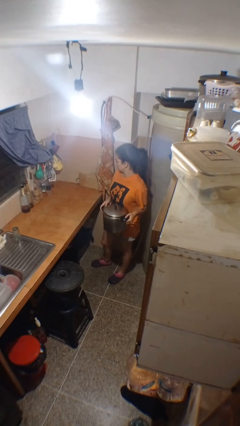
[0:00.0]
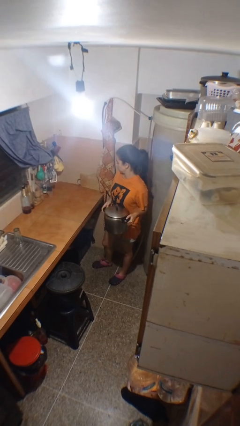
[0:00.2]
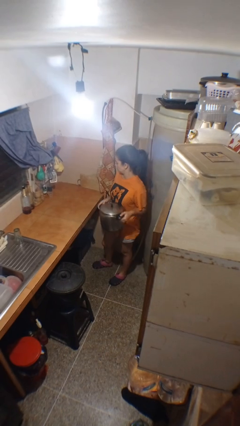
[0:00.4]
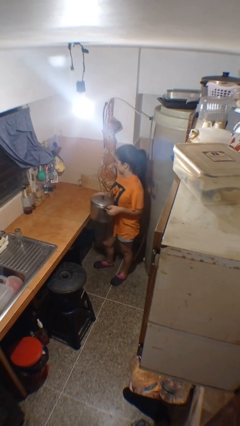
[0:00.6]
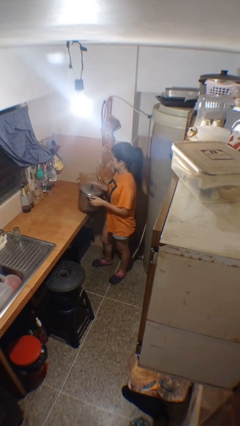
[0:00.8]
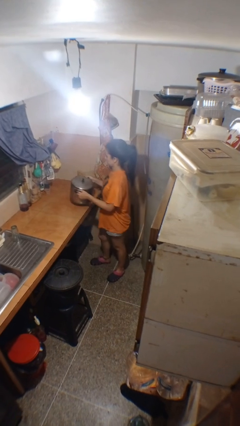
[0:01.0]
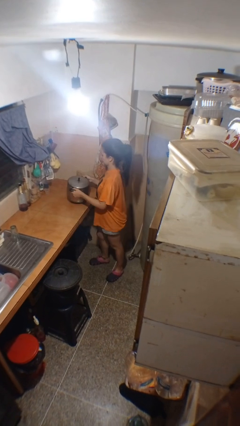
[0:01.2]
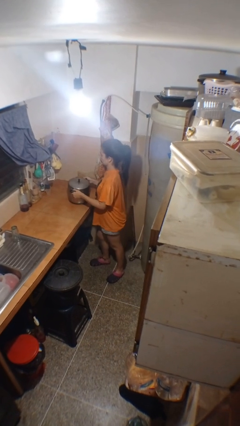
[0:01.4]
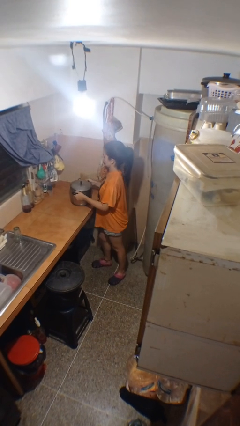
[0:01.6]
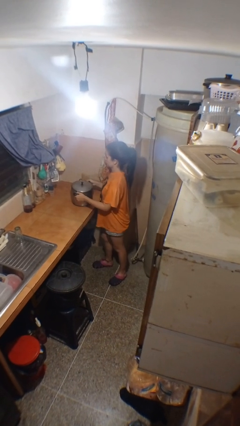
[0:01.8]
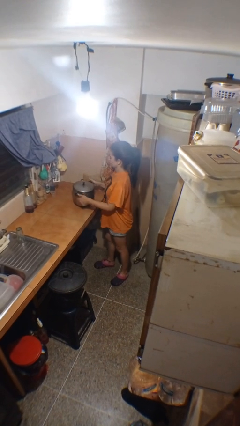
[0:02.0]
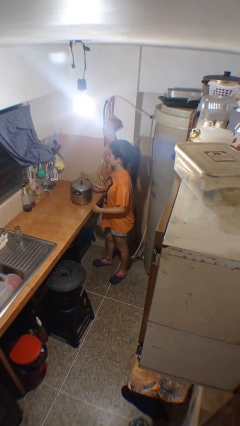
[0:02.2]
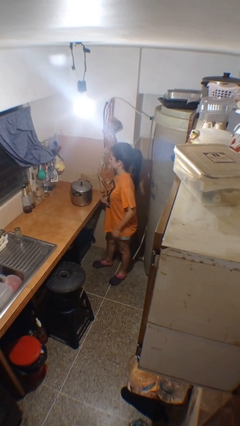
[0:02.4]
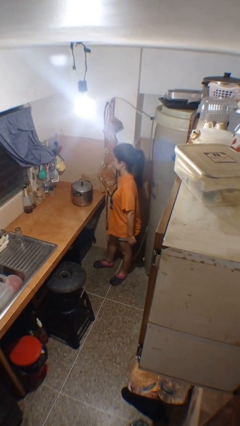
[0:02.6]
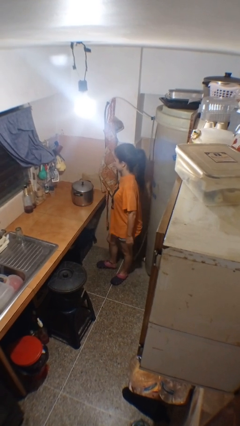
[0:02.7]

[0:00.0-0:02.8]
person puts down object on countertop

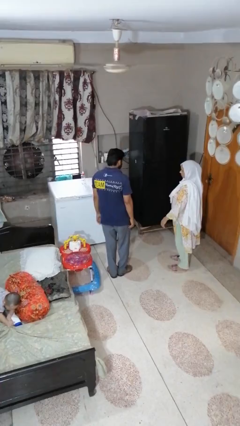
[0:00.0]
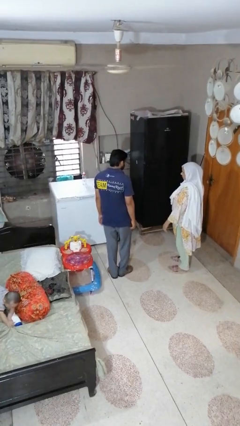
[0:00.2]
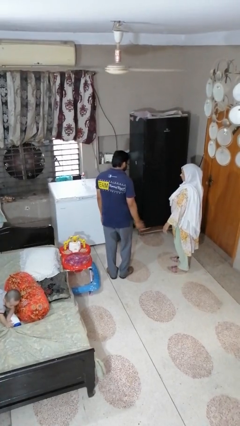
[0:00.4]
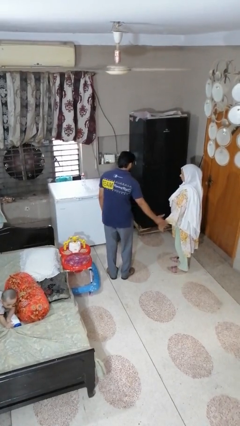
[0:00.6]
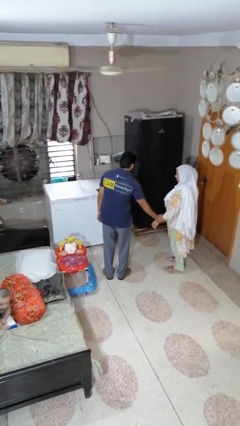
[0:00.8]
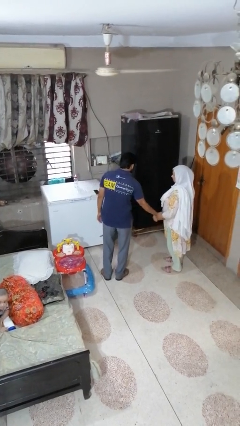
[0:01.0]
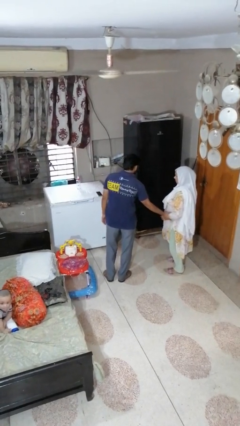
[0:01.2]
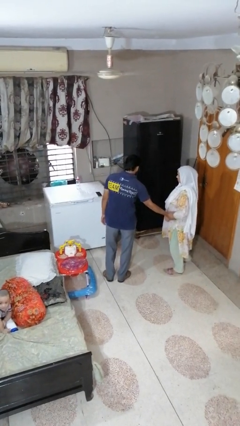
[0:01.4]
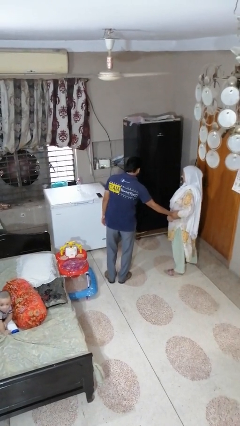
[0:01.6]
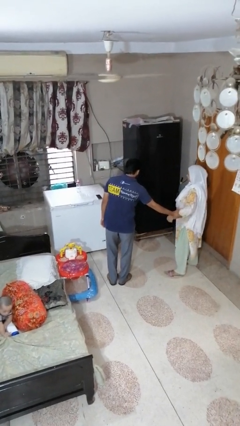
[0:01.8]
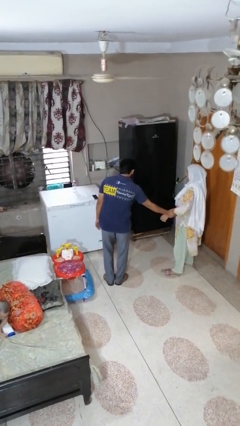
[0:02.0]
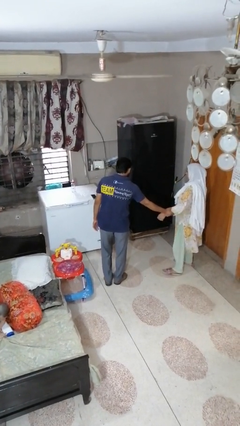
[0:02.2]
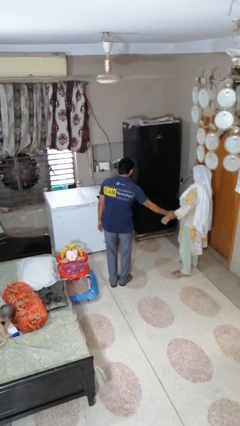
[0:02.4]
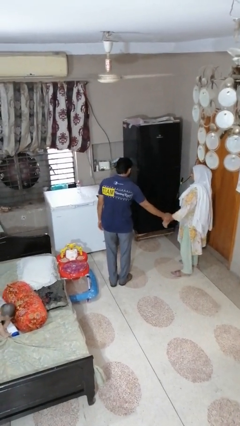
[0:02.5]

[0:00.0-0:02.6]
person grabs person by forearm

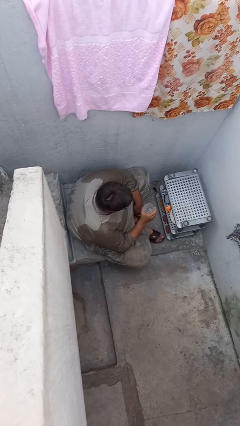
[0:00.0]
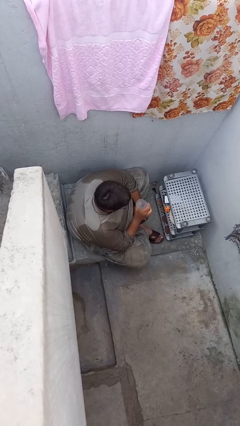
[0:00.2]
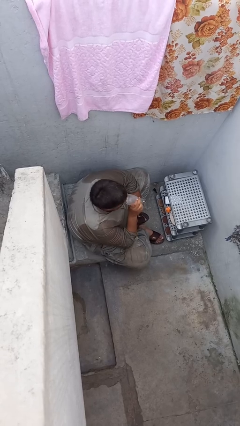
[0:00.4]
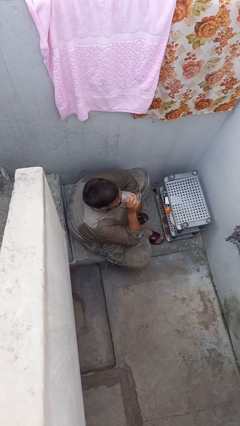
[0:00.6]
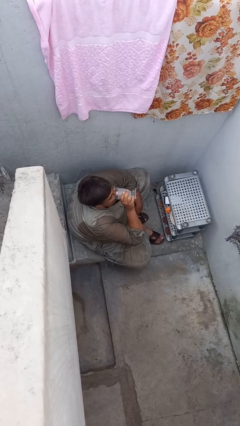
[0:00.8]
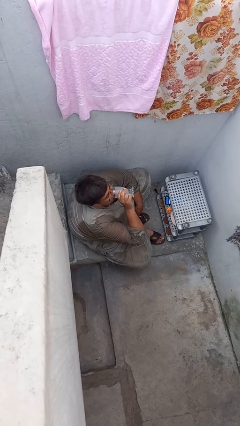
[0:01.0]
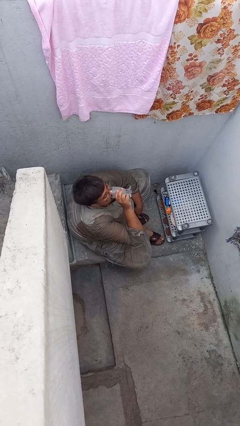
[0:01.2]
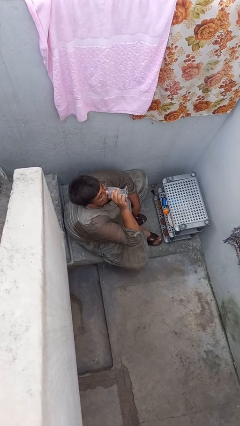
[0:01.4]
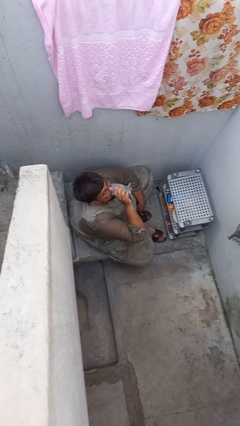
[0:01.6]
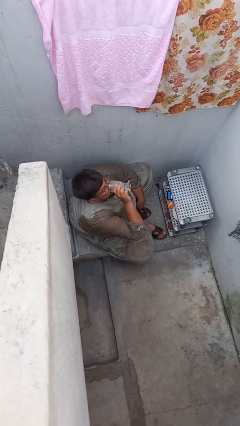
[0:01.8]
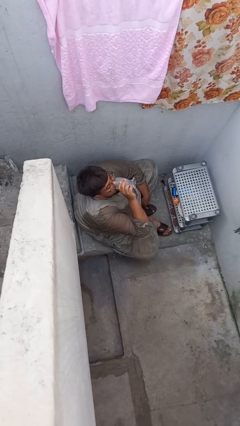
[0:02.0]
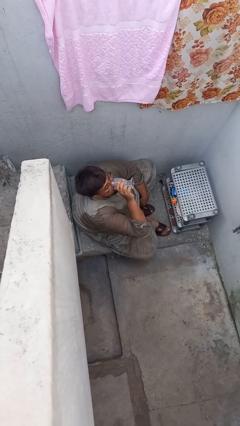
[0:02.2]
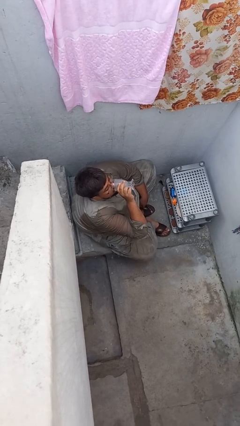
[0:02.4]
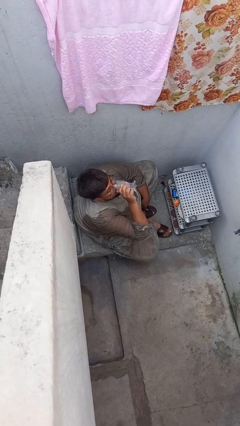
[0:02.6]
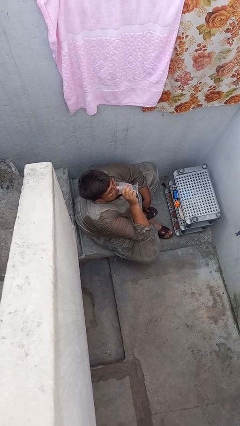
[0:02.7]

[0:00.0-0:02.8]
person drinks from shotglass

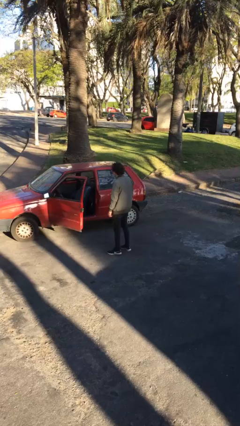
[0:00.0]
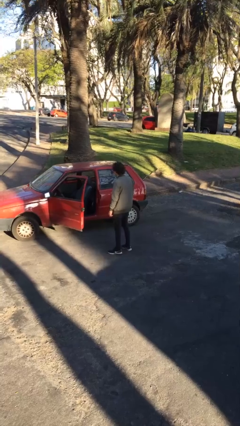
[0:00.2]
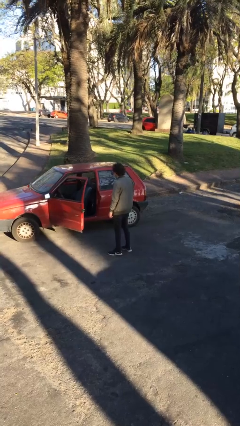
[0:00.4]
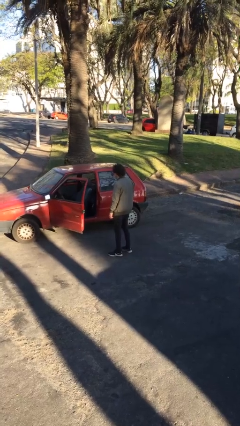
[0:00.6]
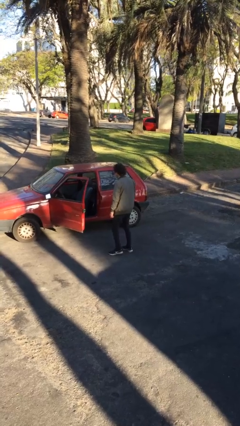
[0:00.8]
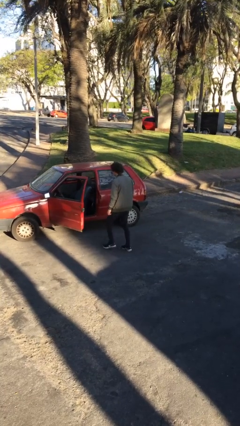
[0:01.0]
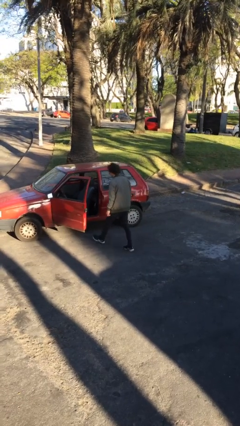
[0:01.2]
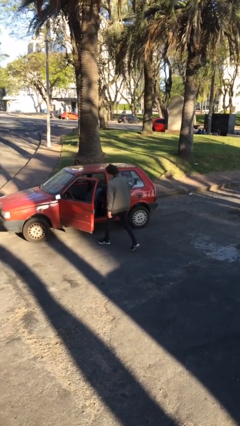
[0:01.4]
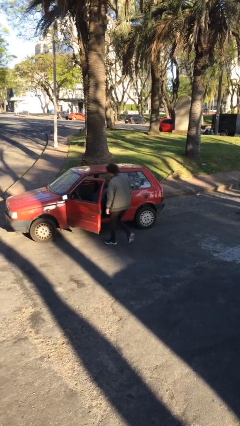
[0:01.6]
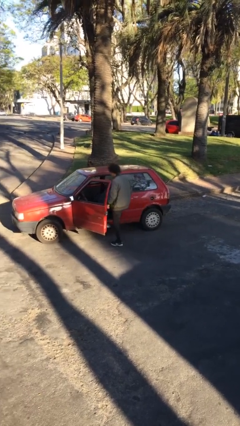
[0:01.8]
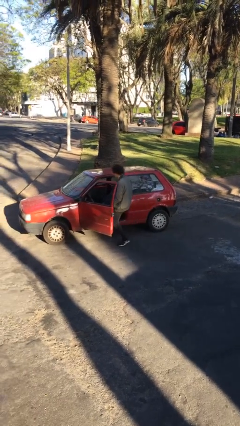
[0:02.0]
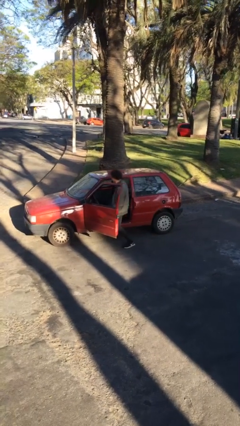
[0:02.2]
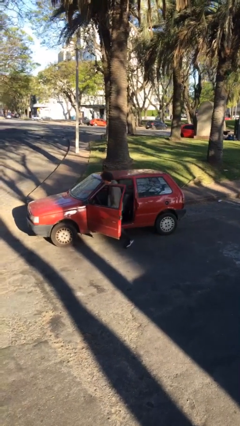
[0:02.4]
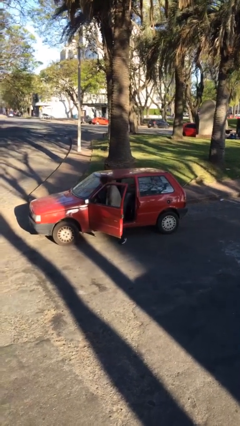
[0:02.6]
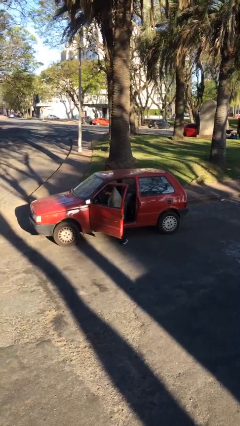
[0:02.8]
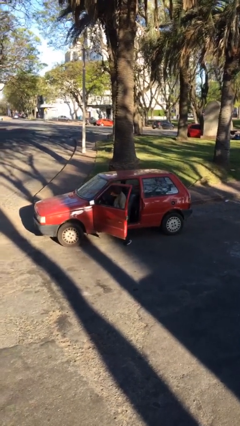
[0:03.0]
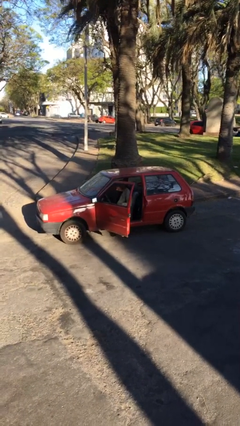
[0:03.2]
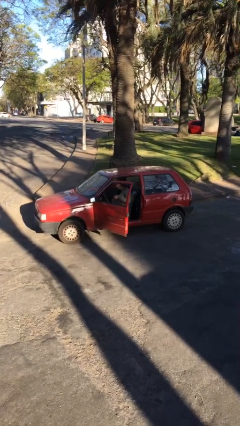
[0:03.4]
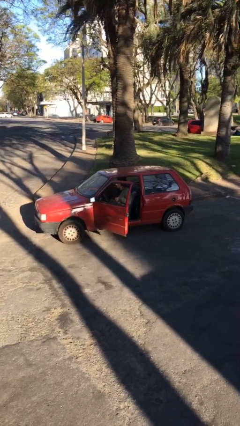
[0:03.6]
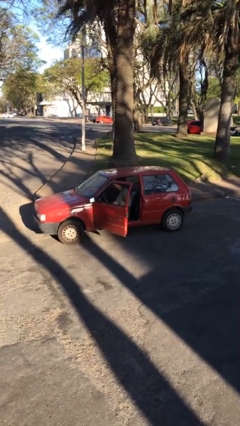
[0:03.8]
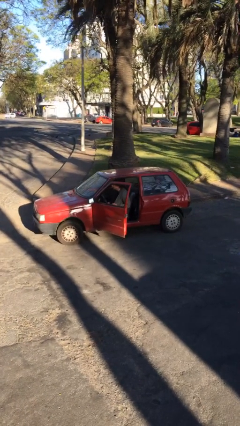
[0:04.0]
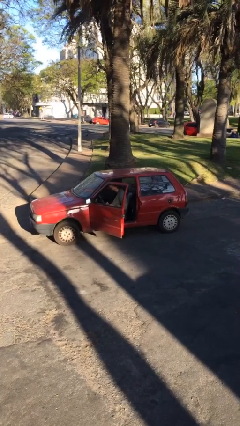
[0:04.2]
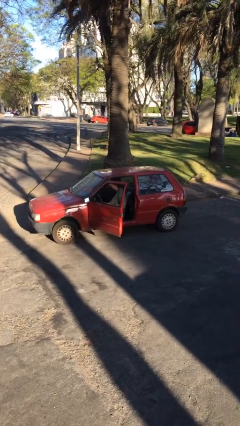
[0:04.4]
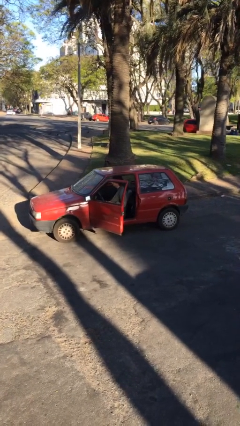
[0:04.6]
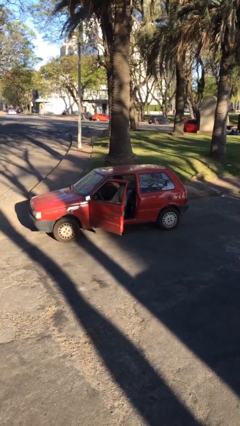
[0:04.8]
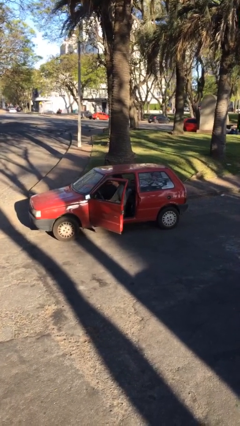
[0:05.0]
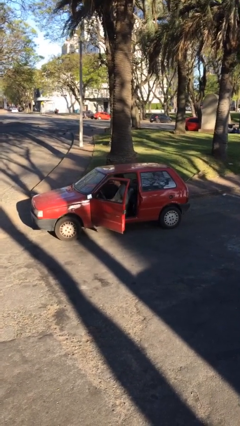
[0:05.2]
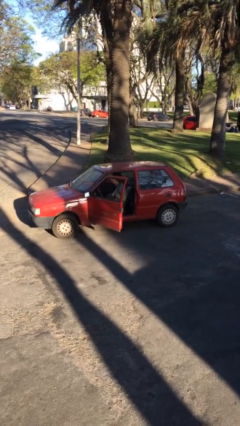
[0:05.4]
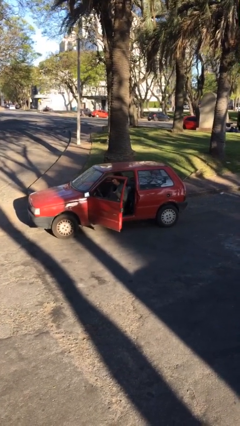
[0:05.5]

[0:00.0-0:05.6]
person enters car

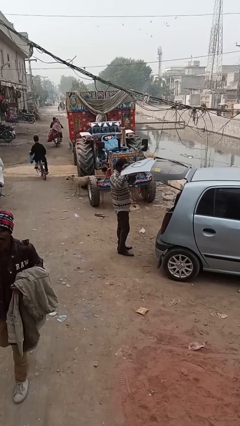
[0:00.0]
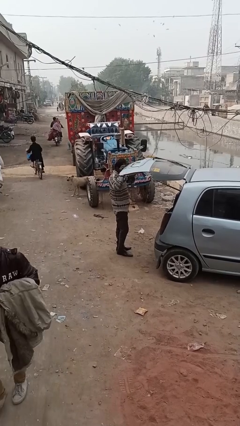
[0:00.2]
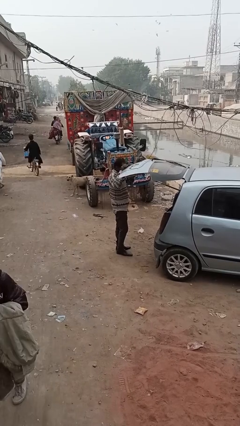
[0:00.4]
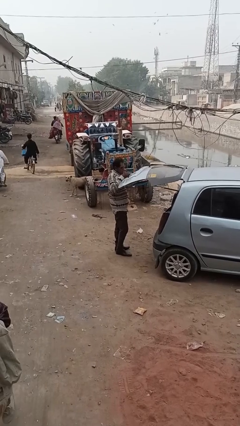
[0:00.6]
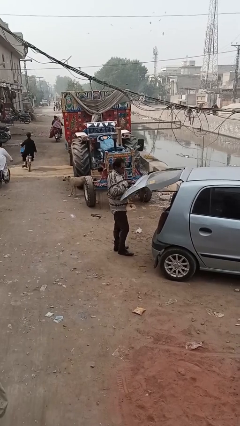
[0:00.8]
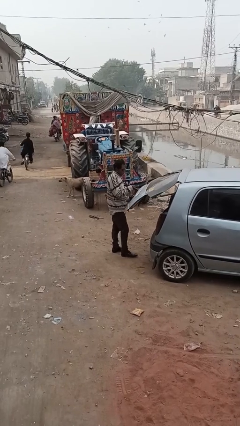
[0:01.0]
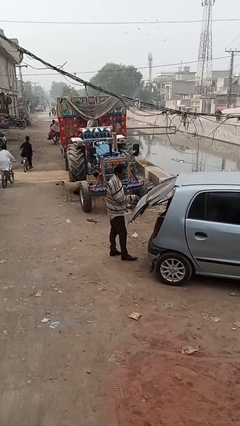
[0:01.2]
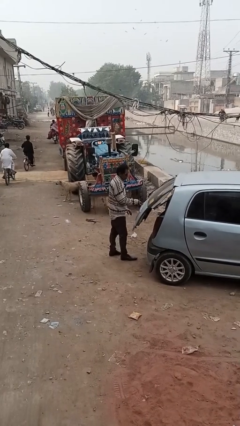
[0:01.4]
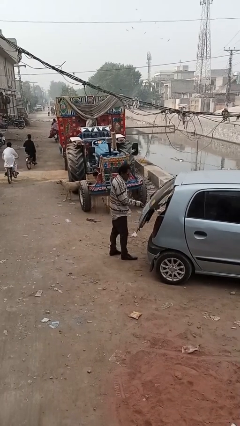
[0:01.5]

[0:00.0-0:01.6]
person closes car trunk

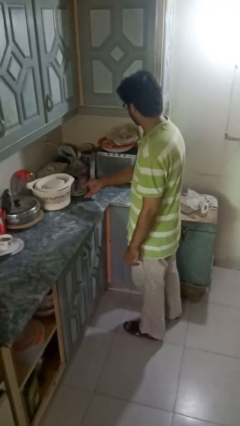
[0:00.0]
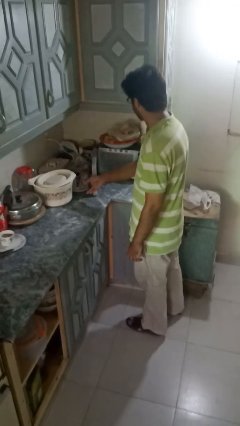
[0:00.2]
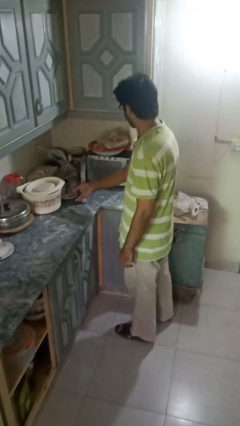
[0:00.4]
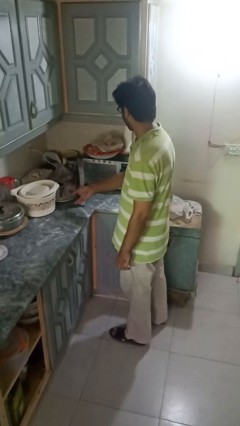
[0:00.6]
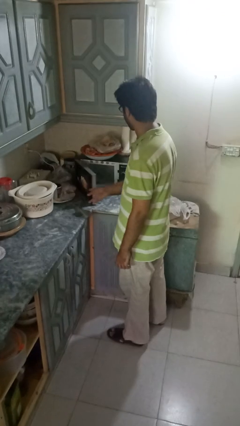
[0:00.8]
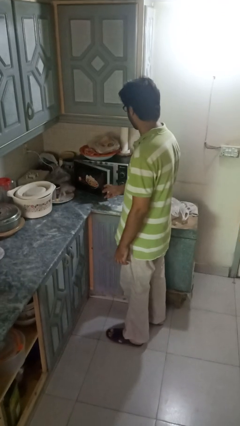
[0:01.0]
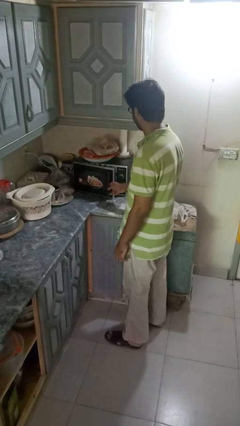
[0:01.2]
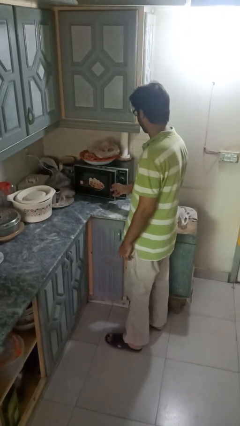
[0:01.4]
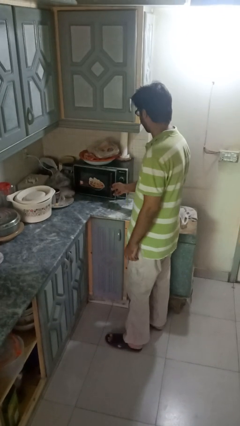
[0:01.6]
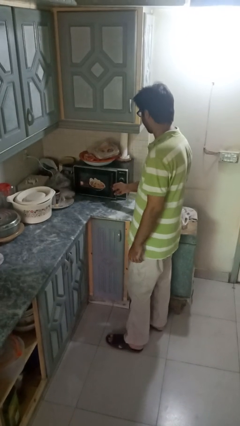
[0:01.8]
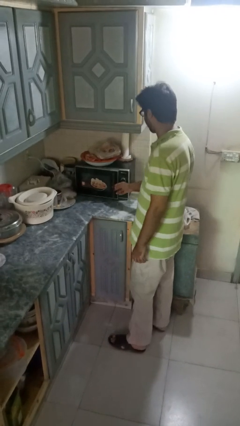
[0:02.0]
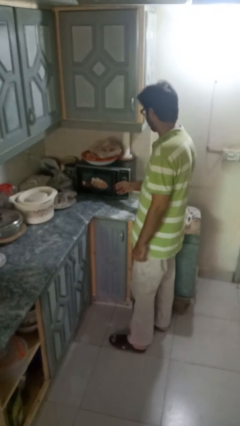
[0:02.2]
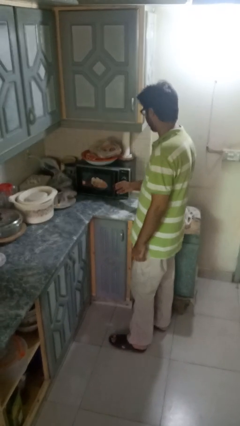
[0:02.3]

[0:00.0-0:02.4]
person closes microwave
